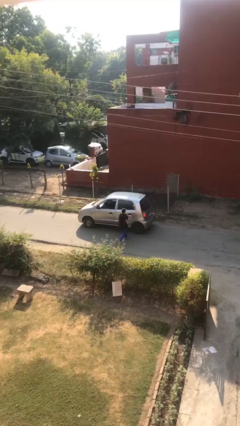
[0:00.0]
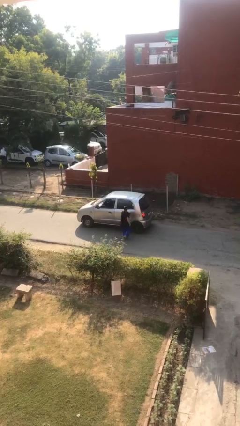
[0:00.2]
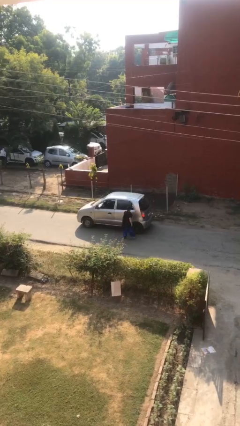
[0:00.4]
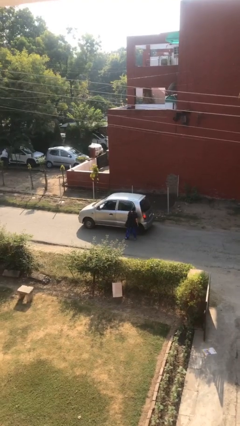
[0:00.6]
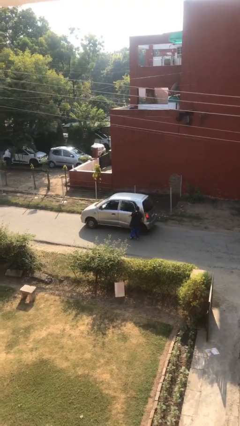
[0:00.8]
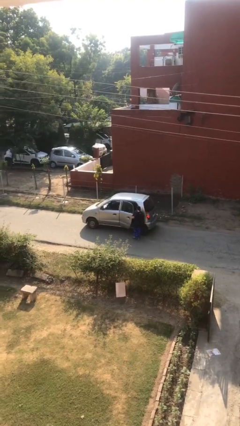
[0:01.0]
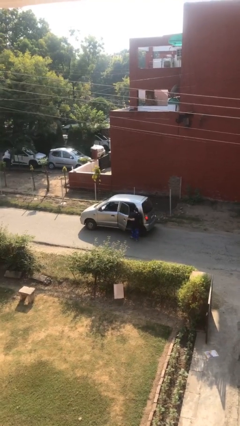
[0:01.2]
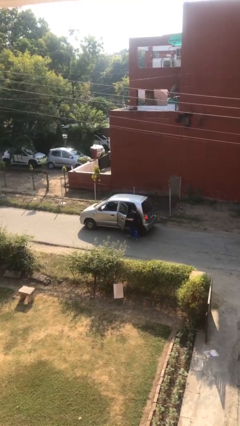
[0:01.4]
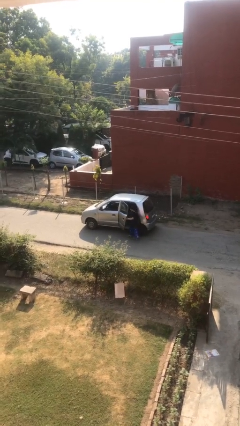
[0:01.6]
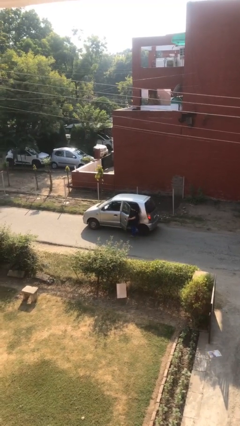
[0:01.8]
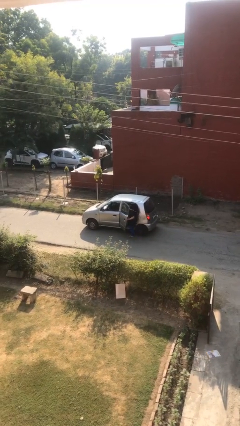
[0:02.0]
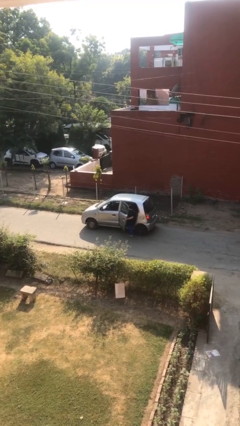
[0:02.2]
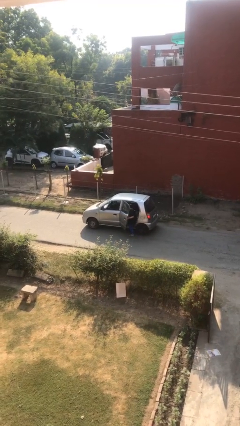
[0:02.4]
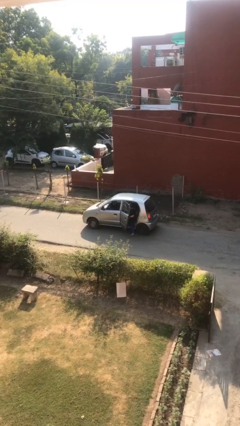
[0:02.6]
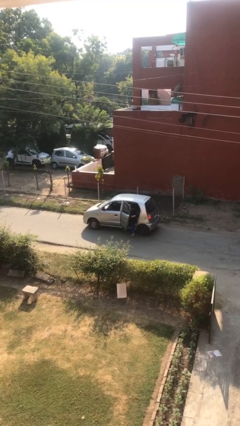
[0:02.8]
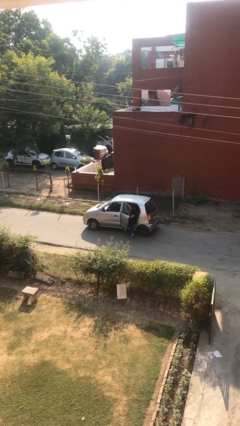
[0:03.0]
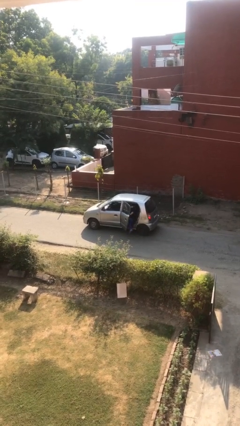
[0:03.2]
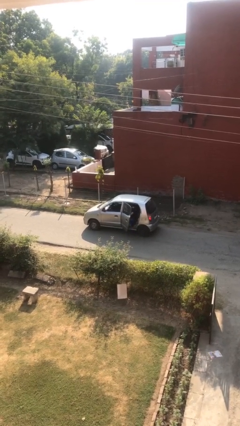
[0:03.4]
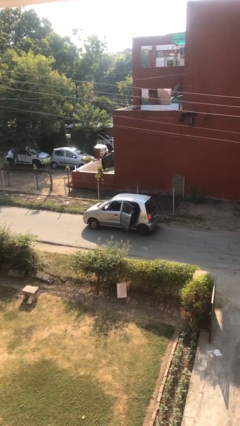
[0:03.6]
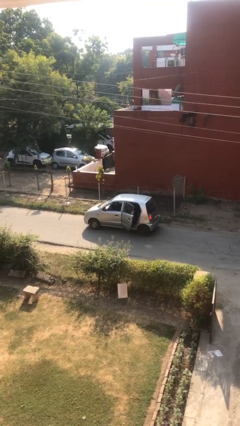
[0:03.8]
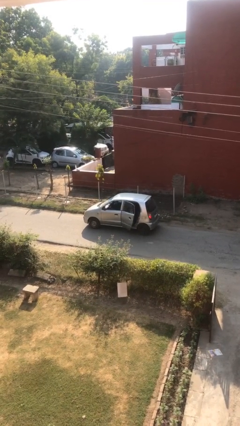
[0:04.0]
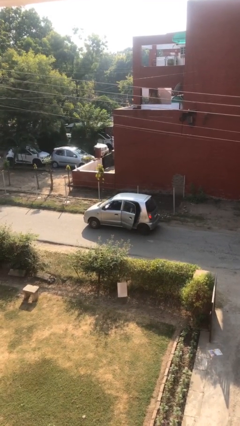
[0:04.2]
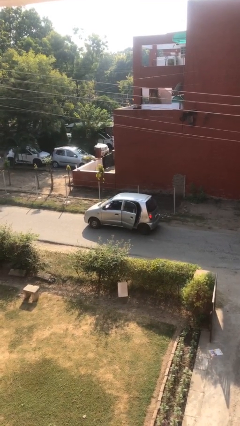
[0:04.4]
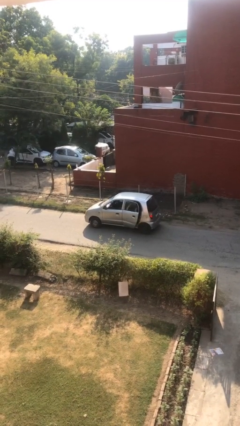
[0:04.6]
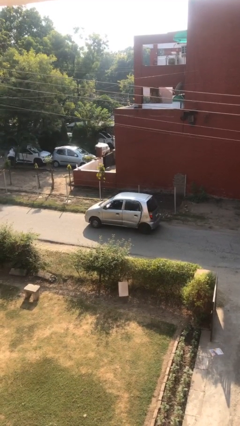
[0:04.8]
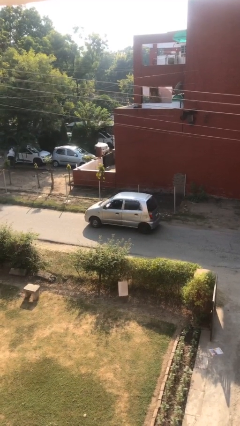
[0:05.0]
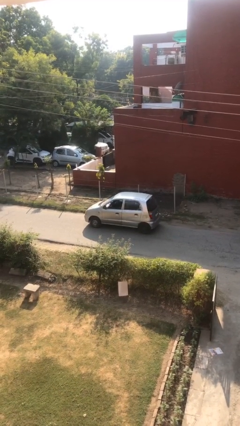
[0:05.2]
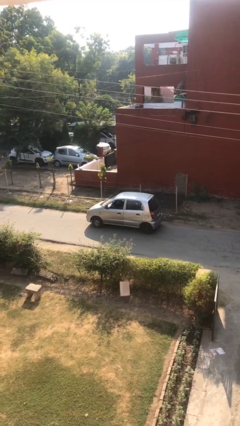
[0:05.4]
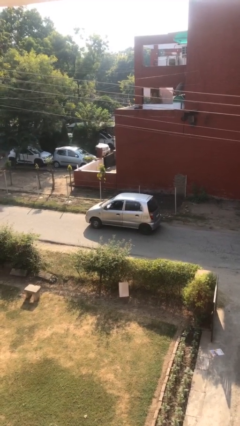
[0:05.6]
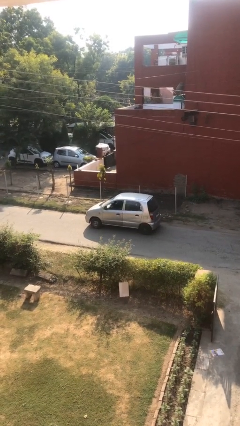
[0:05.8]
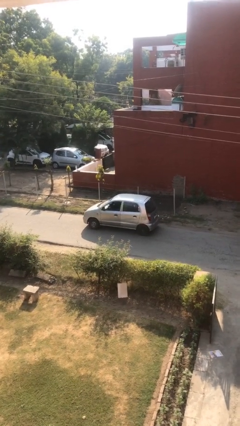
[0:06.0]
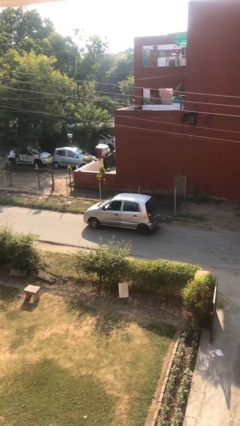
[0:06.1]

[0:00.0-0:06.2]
car picks up person

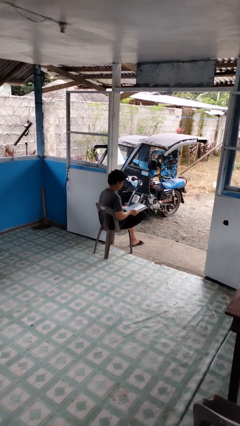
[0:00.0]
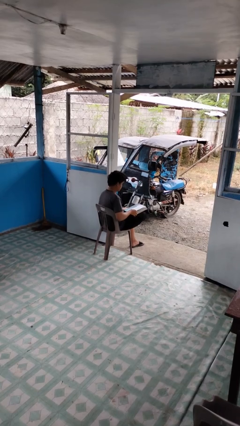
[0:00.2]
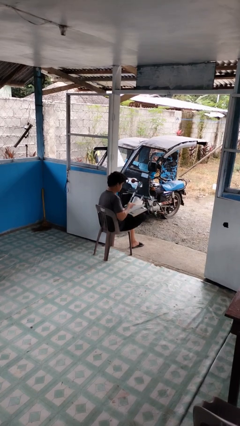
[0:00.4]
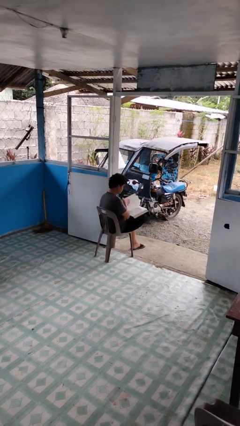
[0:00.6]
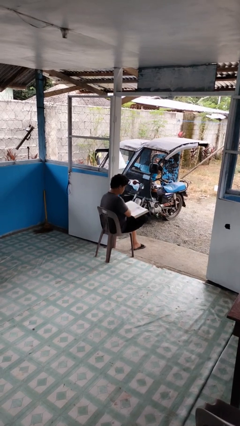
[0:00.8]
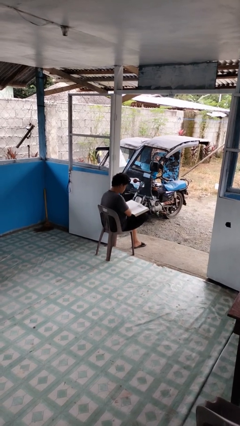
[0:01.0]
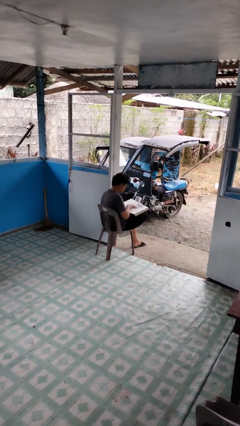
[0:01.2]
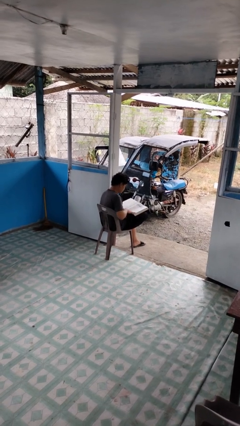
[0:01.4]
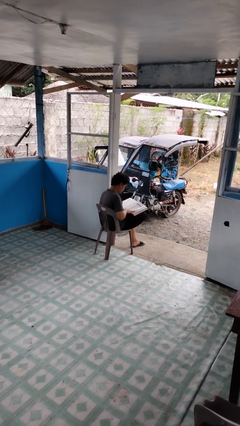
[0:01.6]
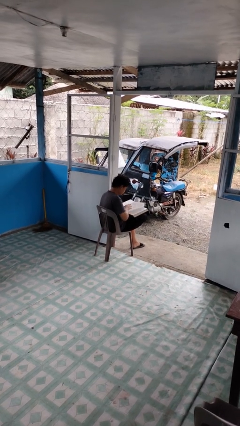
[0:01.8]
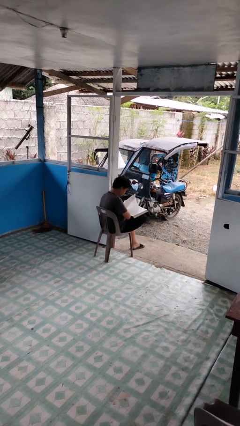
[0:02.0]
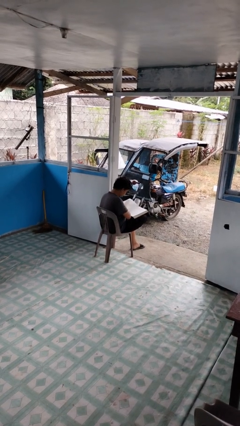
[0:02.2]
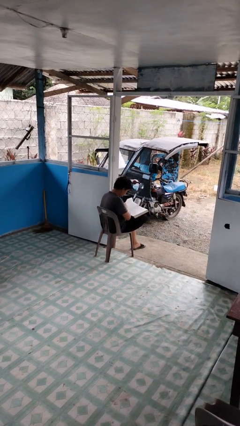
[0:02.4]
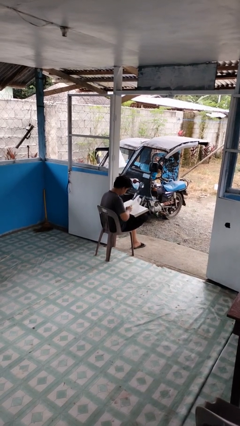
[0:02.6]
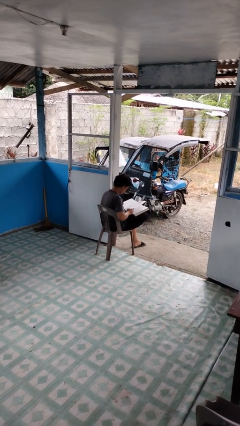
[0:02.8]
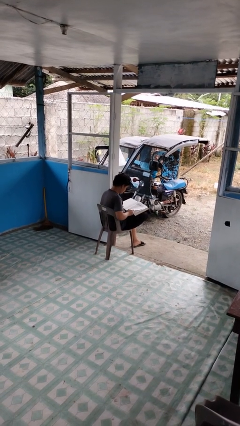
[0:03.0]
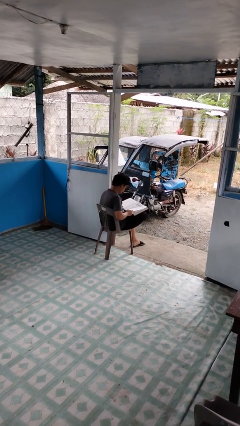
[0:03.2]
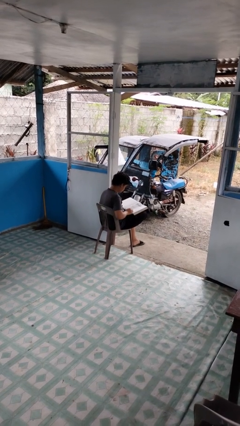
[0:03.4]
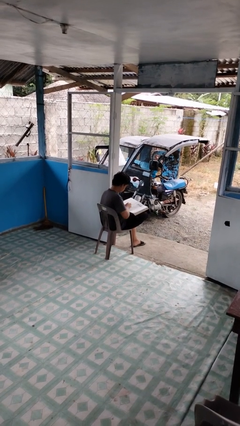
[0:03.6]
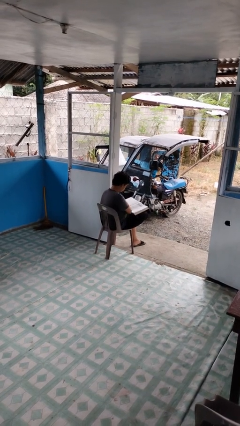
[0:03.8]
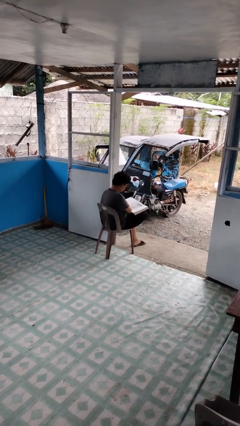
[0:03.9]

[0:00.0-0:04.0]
person reads book

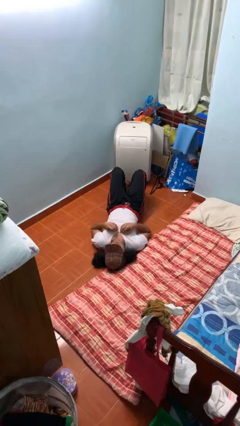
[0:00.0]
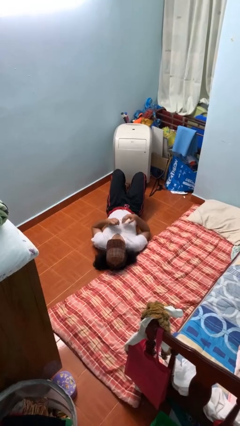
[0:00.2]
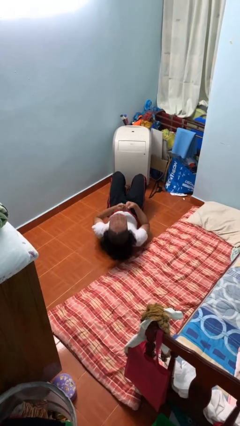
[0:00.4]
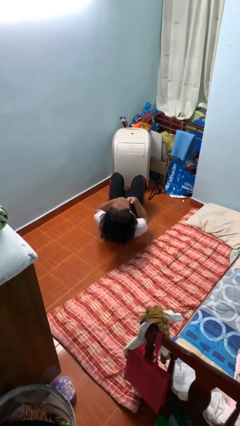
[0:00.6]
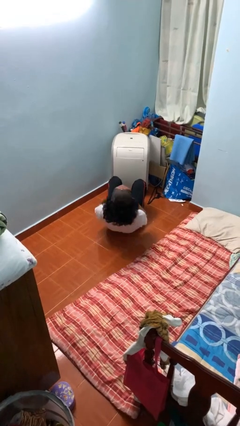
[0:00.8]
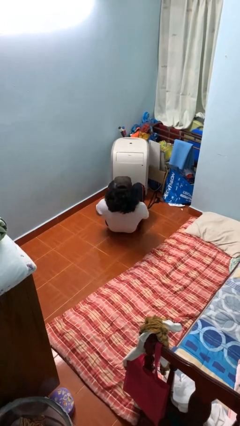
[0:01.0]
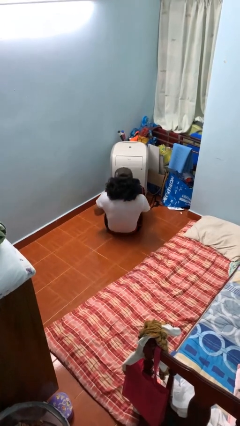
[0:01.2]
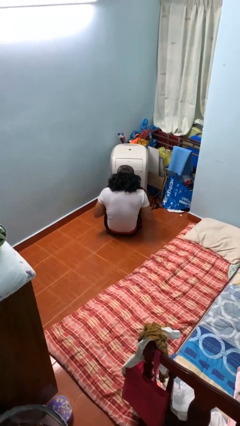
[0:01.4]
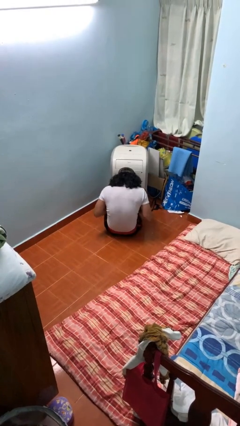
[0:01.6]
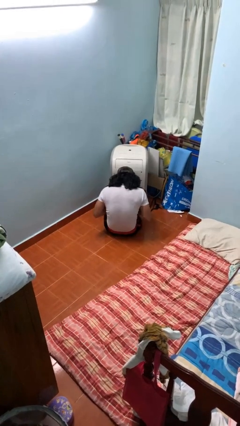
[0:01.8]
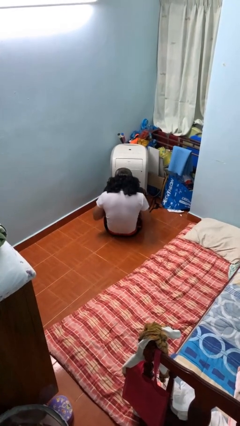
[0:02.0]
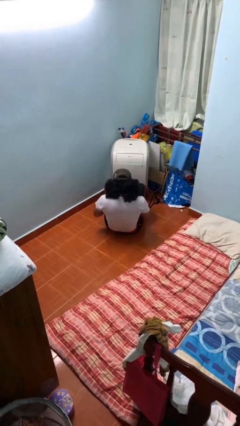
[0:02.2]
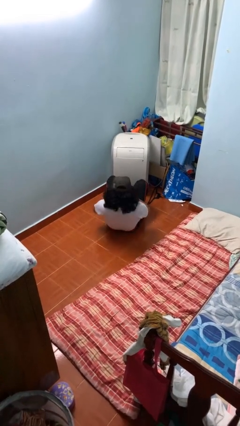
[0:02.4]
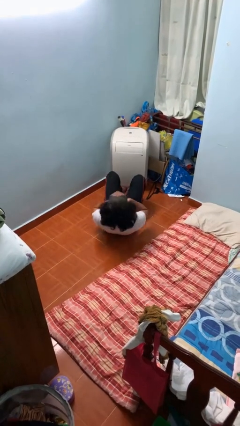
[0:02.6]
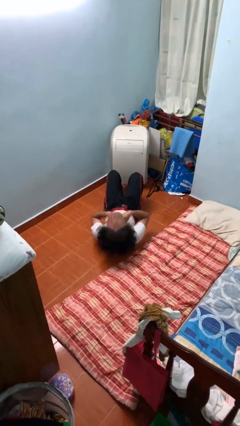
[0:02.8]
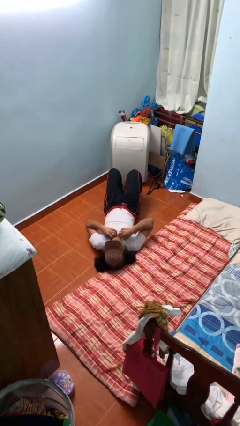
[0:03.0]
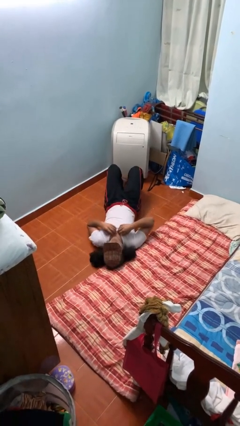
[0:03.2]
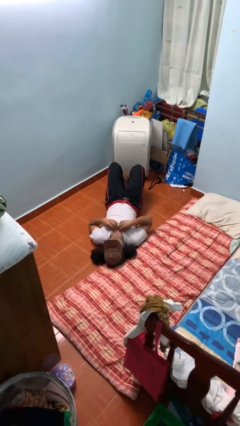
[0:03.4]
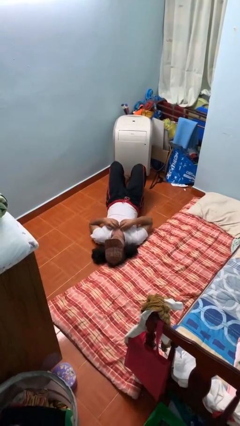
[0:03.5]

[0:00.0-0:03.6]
person exercises with situp

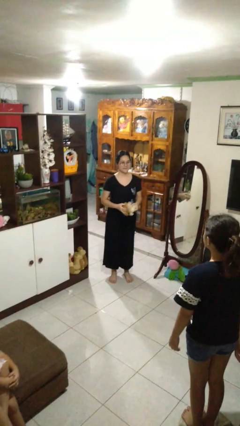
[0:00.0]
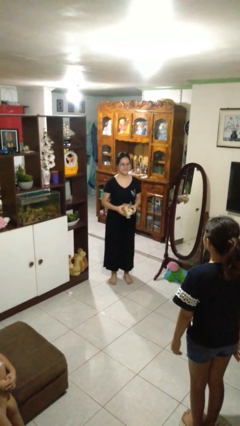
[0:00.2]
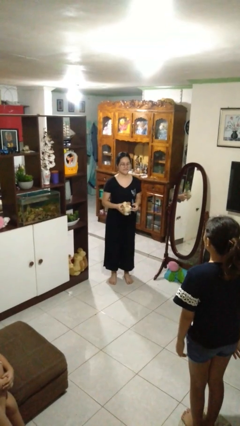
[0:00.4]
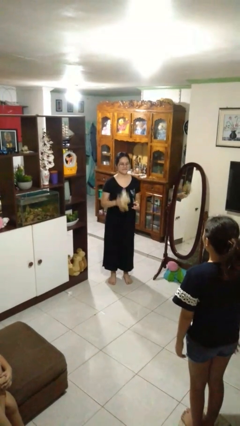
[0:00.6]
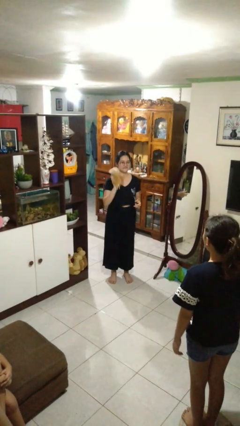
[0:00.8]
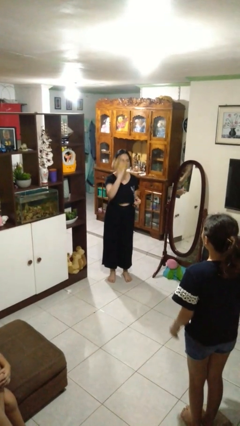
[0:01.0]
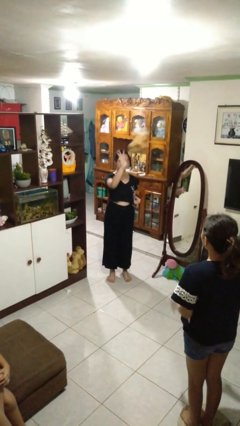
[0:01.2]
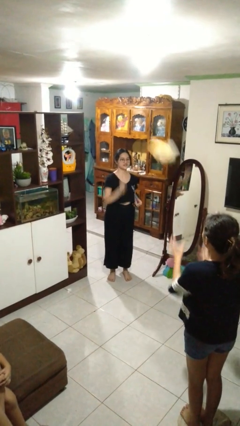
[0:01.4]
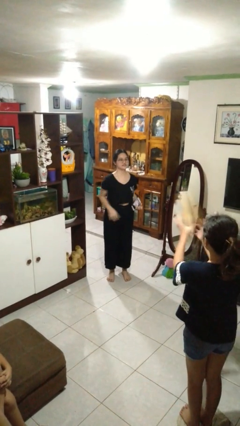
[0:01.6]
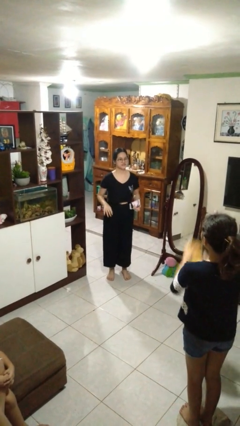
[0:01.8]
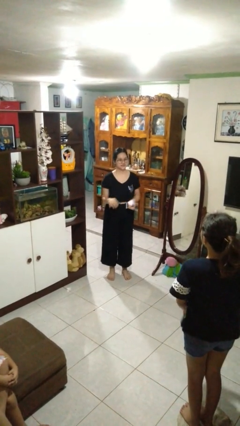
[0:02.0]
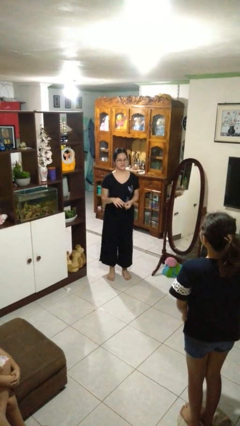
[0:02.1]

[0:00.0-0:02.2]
person throws object to person

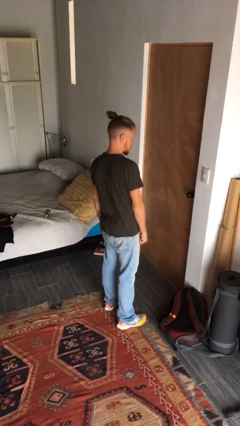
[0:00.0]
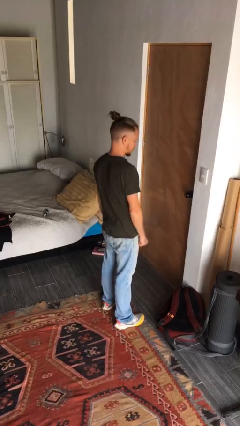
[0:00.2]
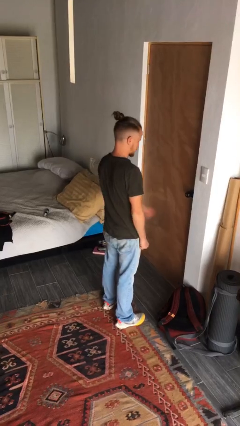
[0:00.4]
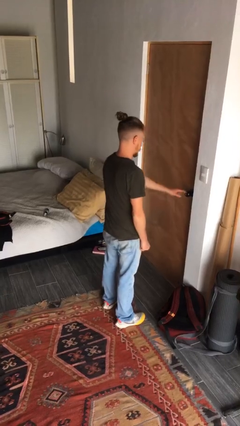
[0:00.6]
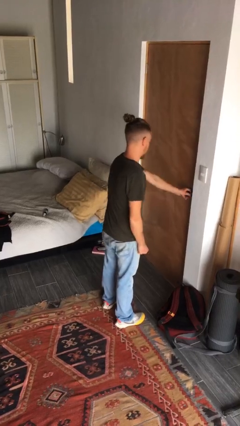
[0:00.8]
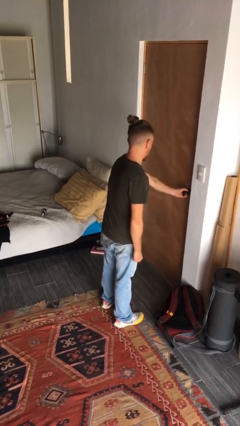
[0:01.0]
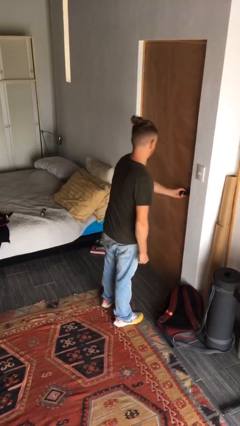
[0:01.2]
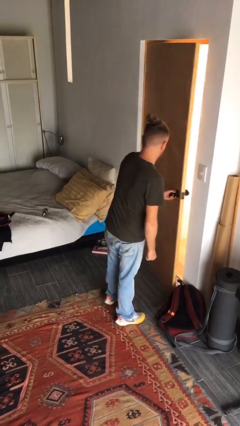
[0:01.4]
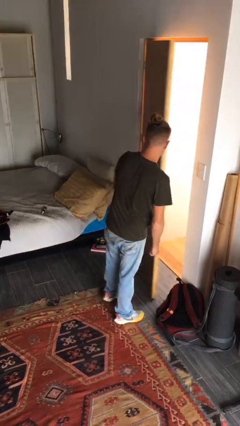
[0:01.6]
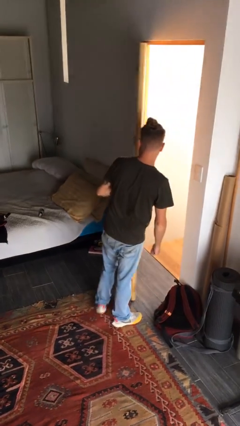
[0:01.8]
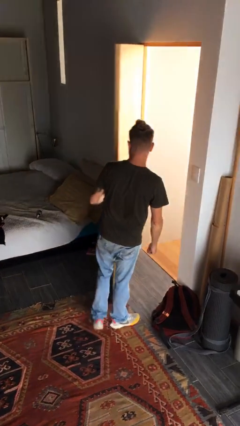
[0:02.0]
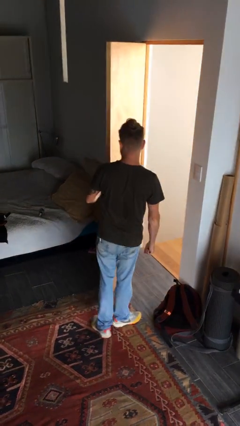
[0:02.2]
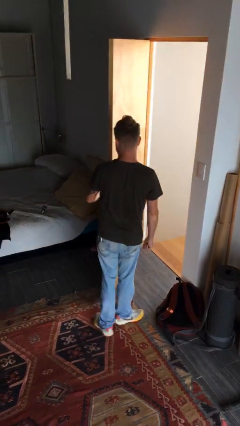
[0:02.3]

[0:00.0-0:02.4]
person opens facility door
